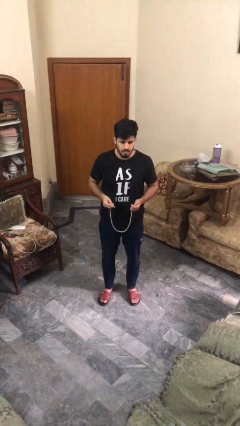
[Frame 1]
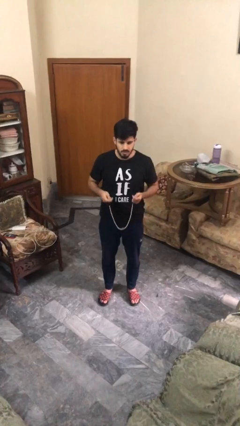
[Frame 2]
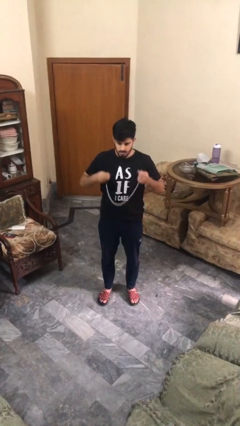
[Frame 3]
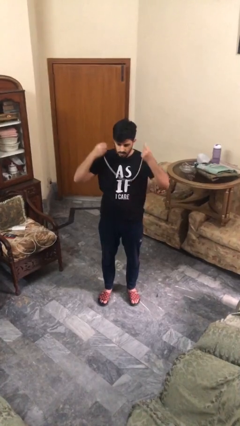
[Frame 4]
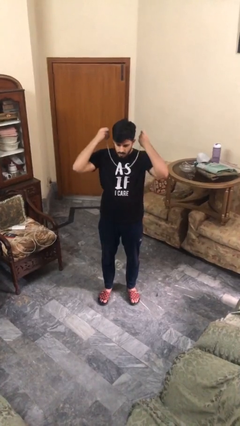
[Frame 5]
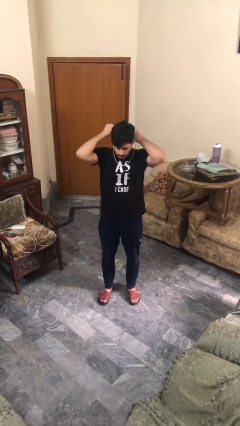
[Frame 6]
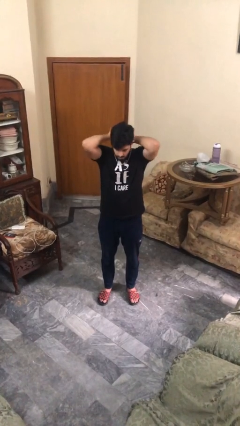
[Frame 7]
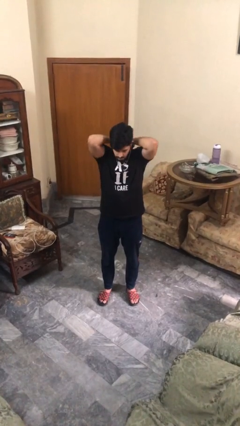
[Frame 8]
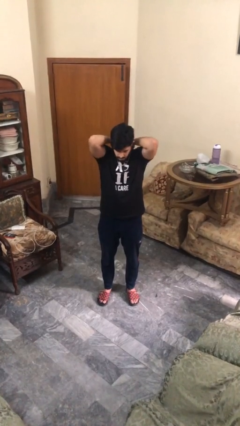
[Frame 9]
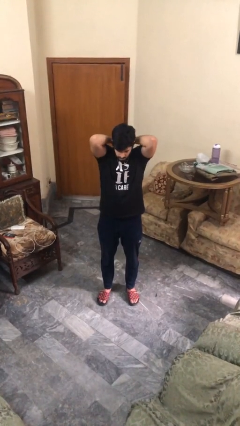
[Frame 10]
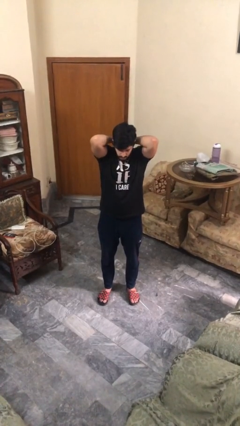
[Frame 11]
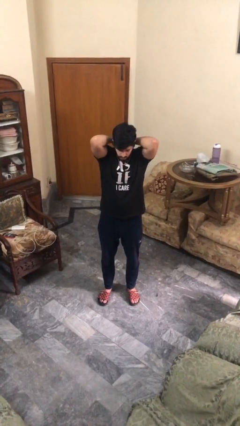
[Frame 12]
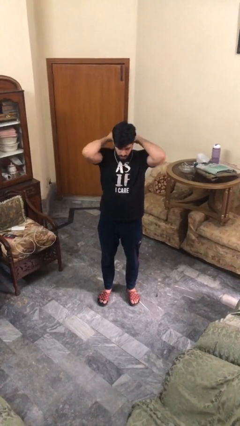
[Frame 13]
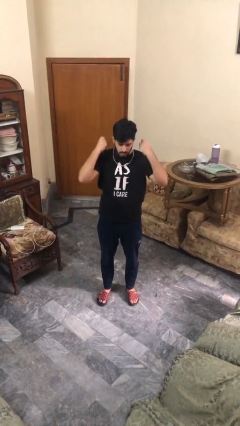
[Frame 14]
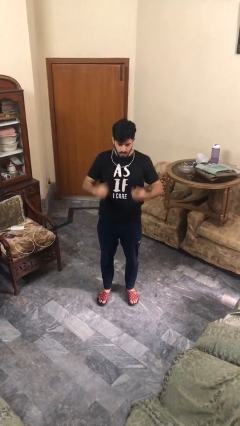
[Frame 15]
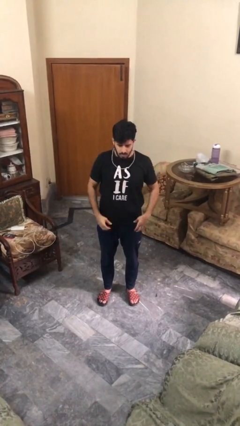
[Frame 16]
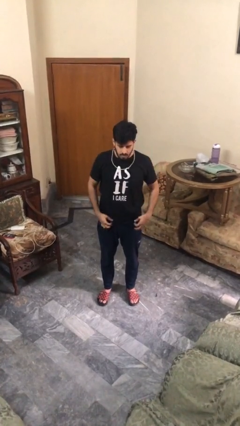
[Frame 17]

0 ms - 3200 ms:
person puts on necklace

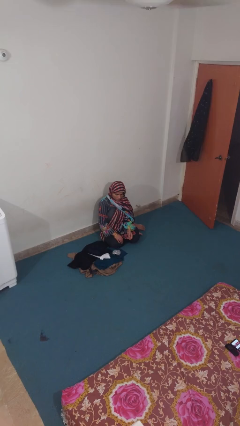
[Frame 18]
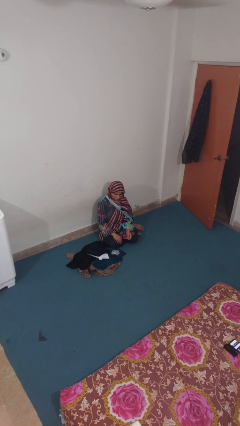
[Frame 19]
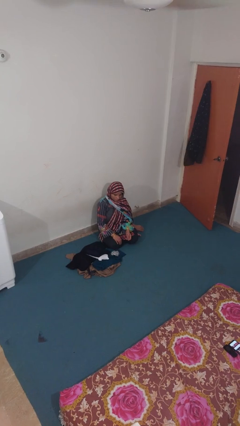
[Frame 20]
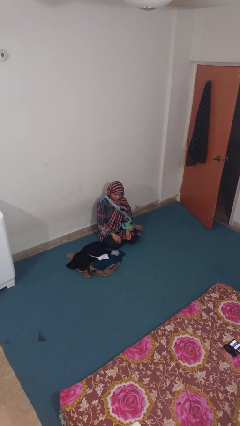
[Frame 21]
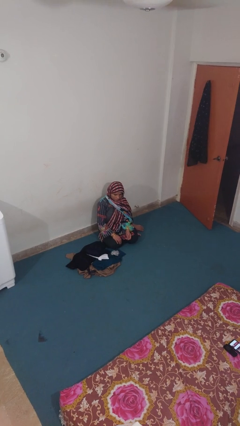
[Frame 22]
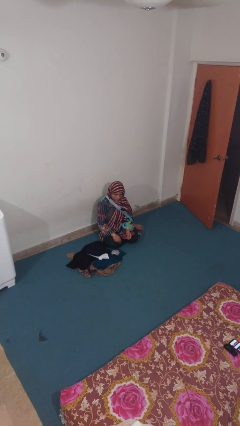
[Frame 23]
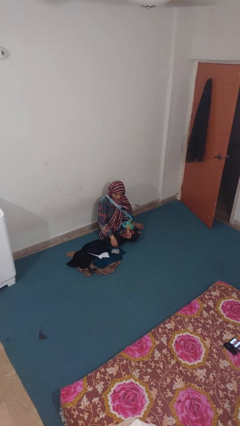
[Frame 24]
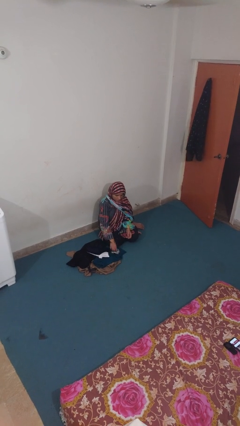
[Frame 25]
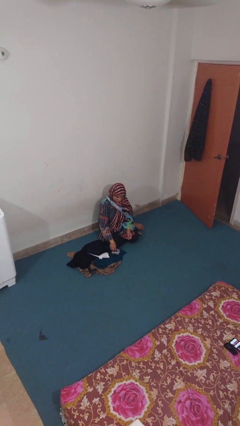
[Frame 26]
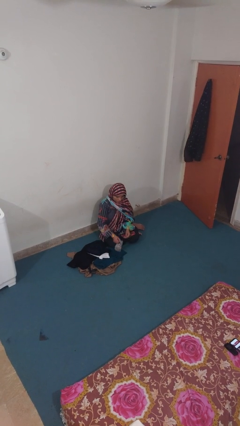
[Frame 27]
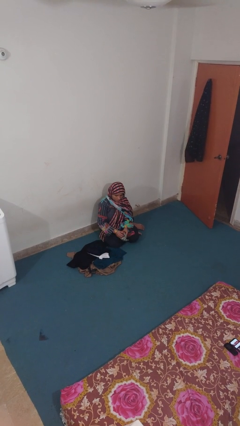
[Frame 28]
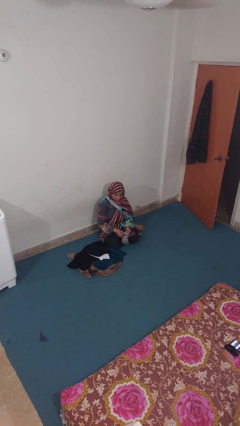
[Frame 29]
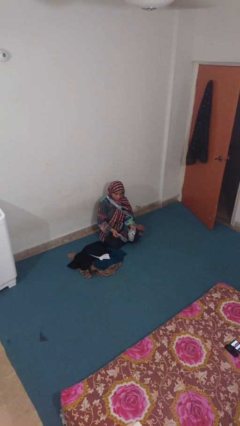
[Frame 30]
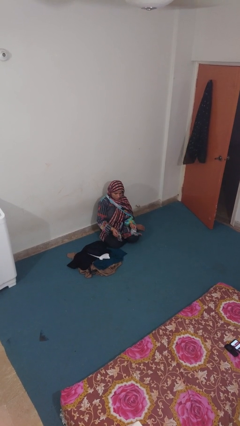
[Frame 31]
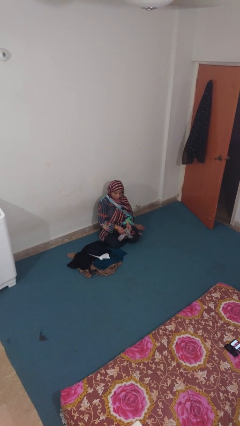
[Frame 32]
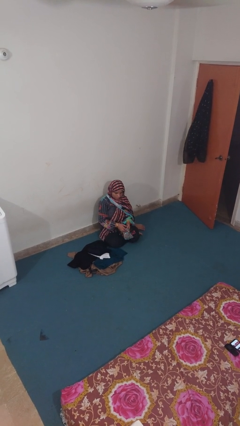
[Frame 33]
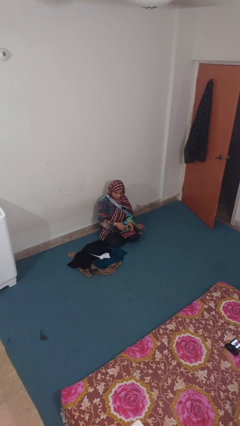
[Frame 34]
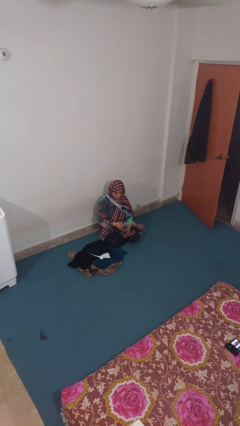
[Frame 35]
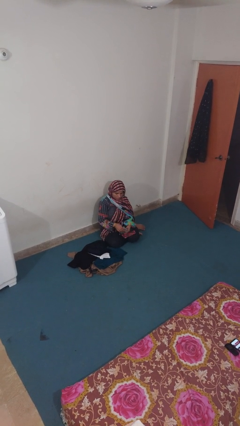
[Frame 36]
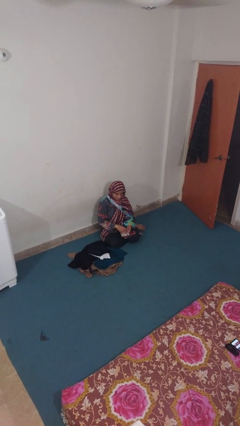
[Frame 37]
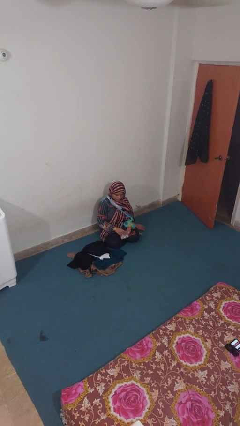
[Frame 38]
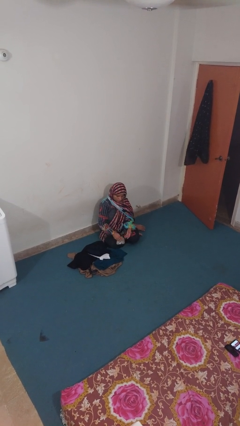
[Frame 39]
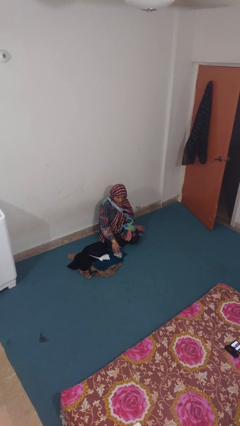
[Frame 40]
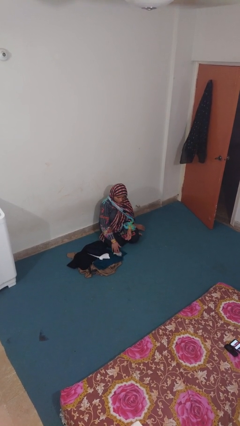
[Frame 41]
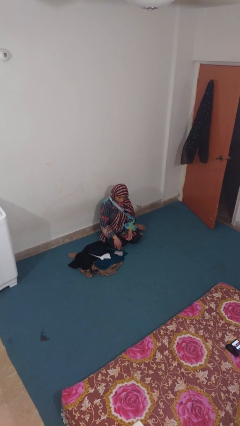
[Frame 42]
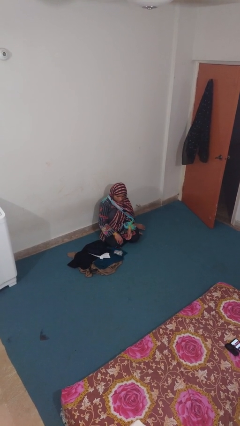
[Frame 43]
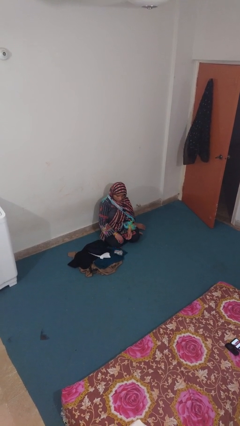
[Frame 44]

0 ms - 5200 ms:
person folds socks

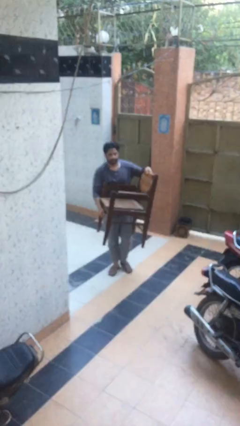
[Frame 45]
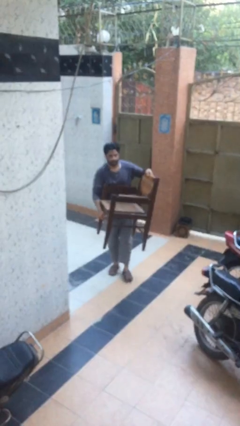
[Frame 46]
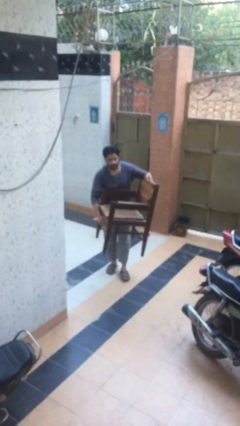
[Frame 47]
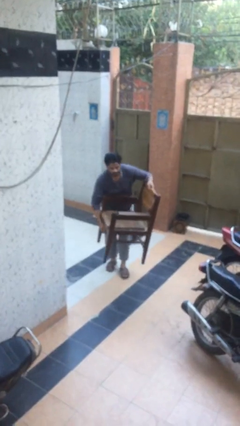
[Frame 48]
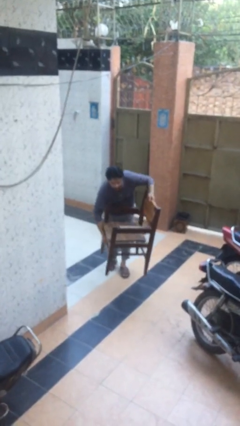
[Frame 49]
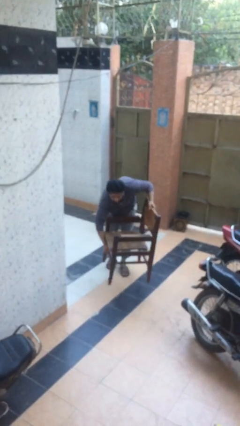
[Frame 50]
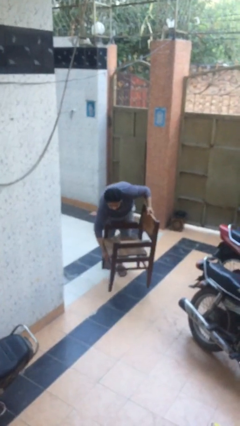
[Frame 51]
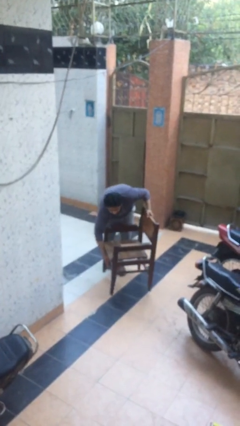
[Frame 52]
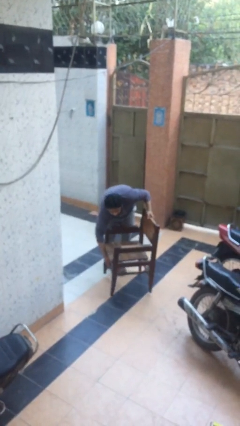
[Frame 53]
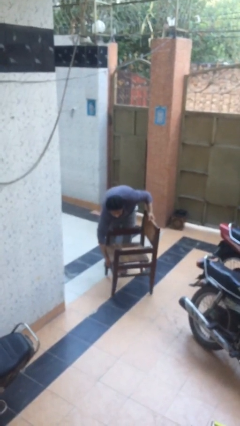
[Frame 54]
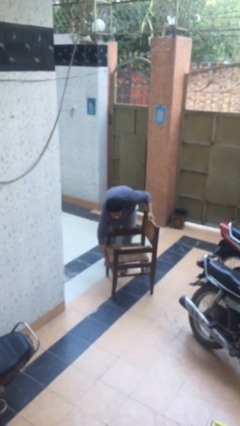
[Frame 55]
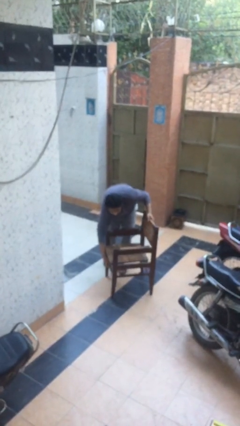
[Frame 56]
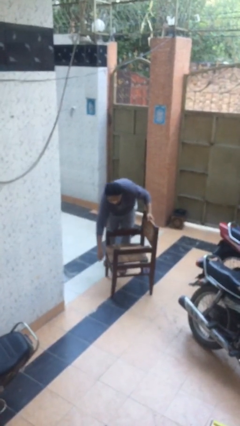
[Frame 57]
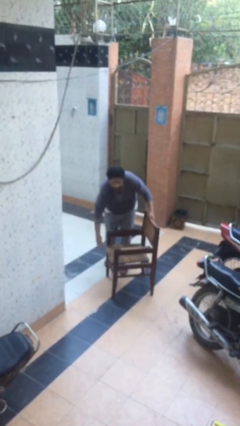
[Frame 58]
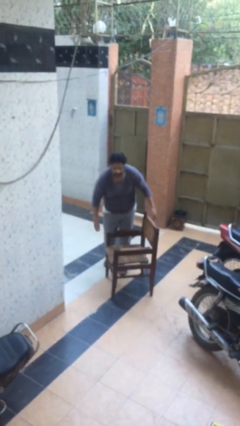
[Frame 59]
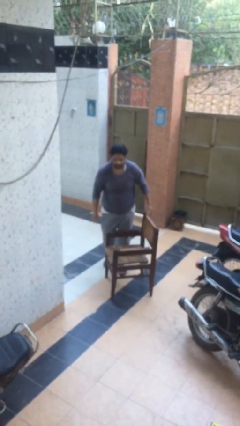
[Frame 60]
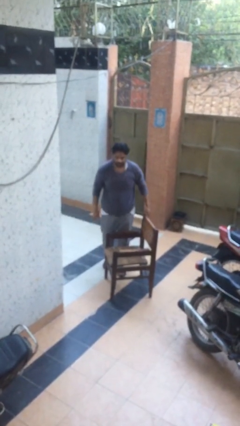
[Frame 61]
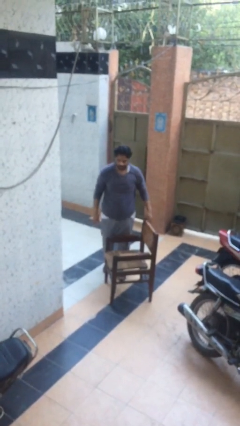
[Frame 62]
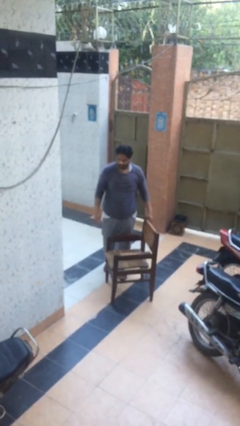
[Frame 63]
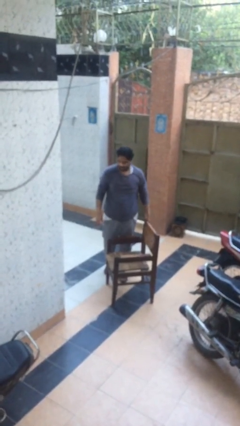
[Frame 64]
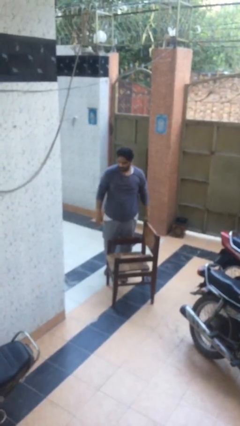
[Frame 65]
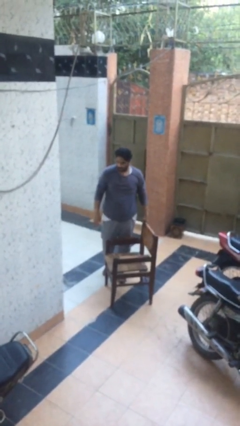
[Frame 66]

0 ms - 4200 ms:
person puts down object on floor

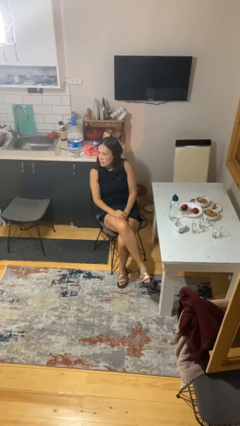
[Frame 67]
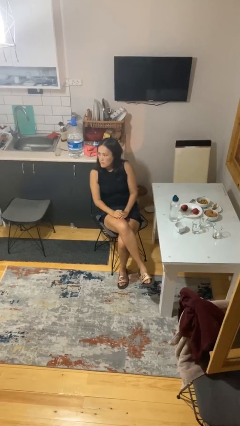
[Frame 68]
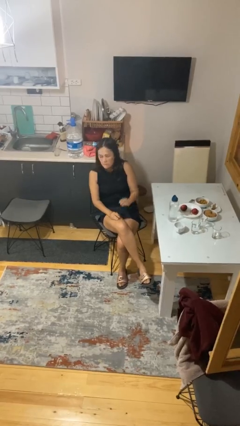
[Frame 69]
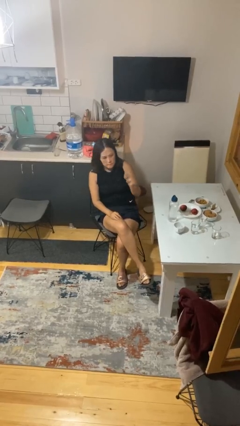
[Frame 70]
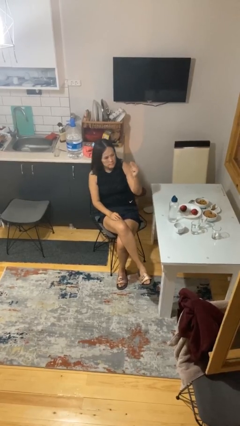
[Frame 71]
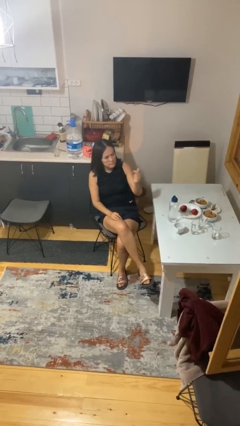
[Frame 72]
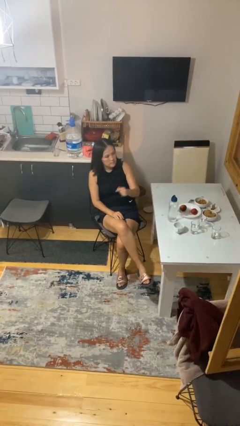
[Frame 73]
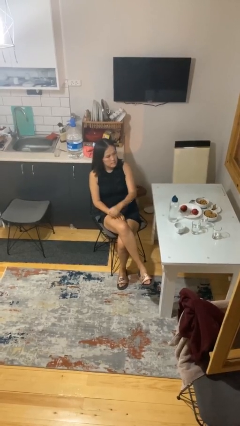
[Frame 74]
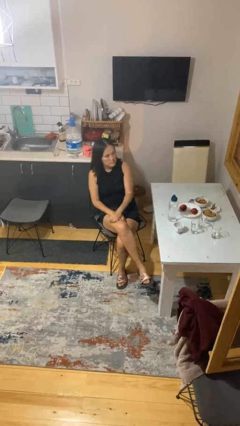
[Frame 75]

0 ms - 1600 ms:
person snaps fingers

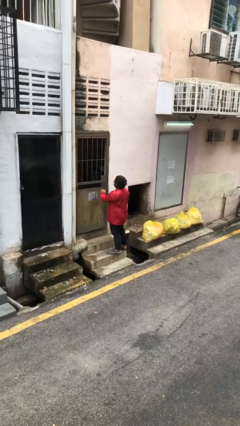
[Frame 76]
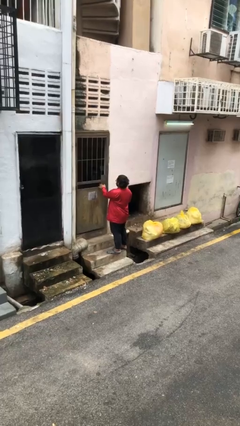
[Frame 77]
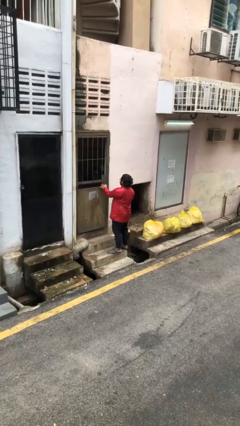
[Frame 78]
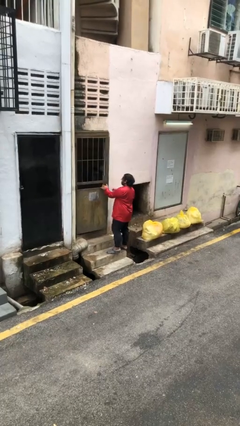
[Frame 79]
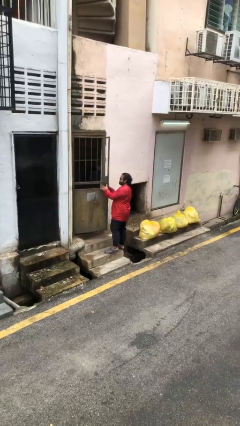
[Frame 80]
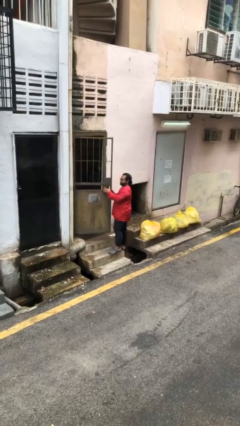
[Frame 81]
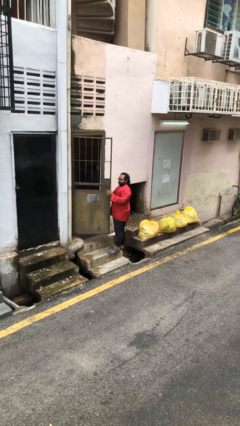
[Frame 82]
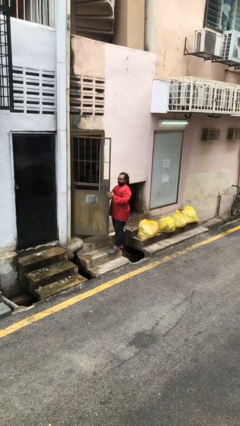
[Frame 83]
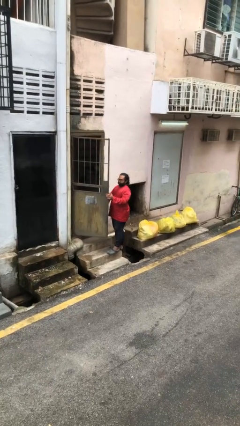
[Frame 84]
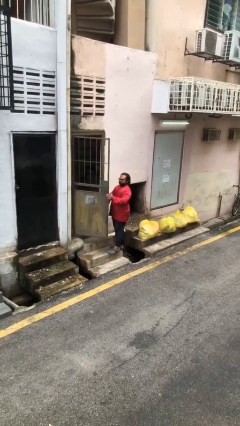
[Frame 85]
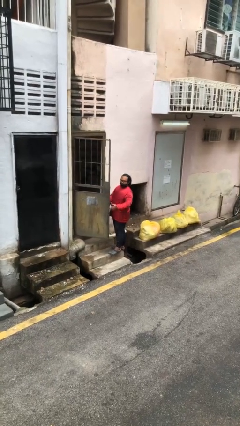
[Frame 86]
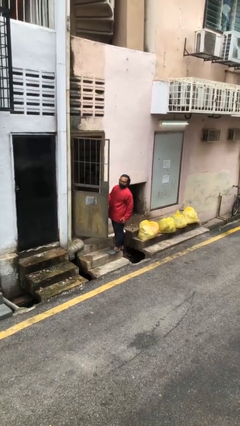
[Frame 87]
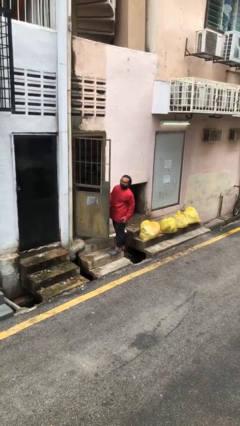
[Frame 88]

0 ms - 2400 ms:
person opens facility door

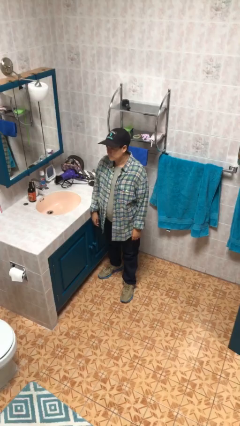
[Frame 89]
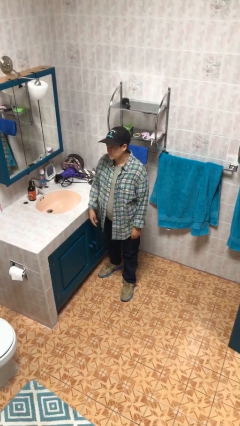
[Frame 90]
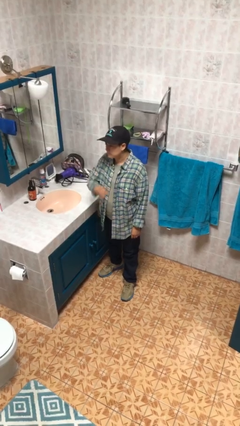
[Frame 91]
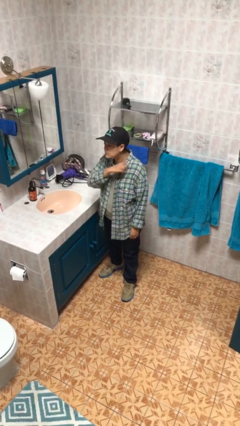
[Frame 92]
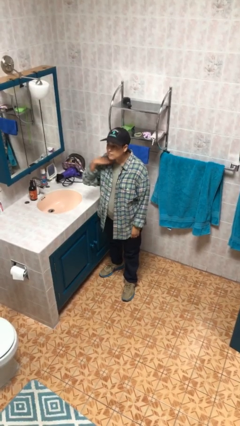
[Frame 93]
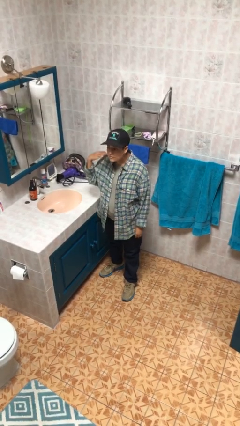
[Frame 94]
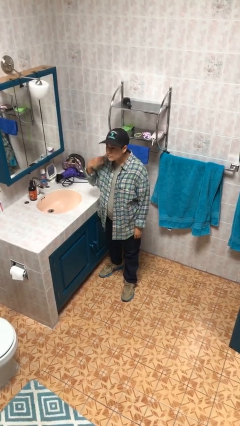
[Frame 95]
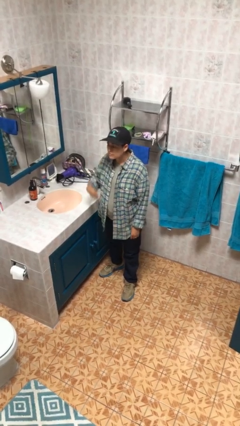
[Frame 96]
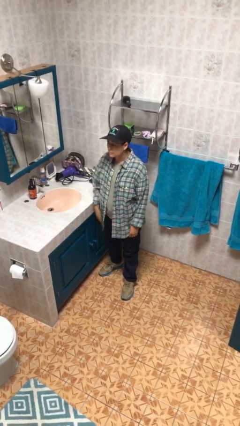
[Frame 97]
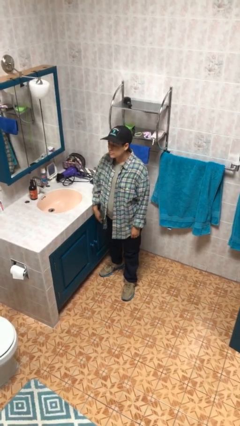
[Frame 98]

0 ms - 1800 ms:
person gestures cut
